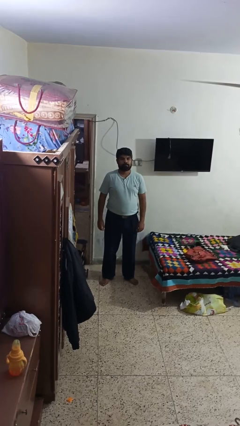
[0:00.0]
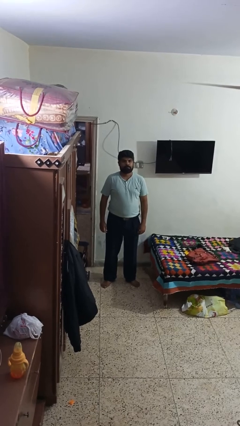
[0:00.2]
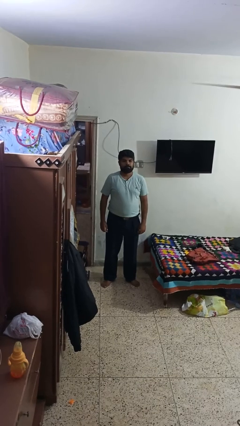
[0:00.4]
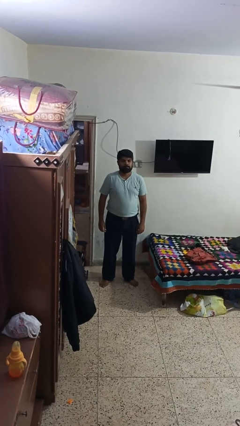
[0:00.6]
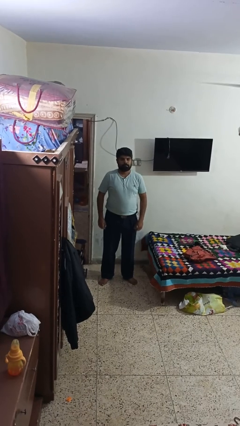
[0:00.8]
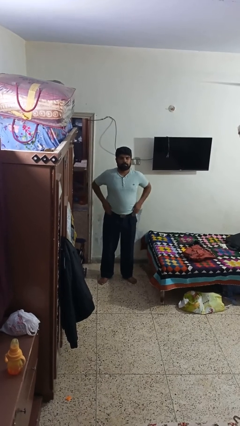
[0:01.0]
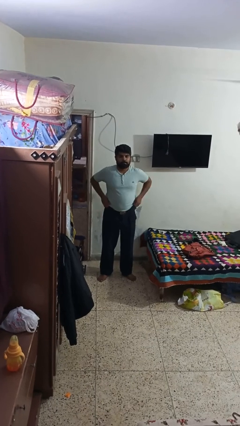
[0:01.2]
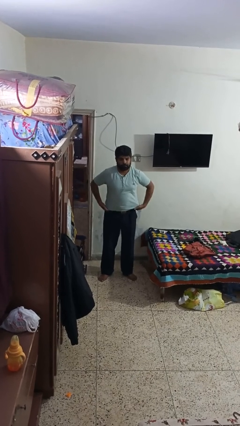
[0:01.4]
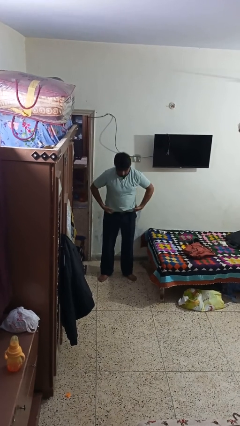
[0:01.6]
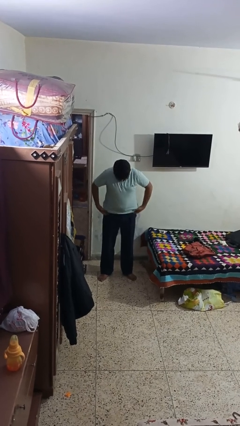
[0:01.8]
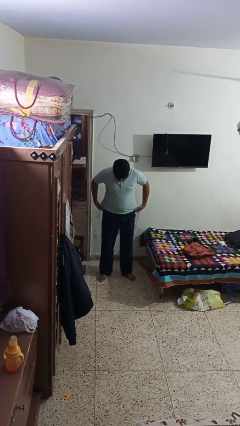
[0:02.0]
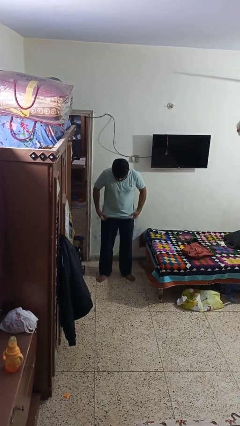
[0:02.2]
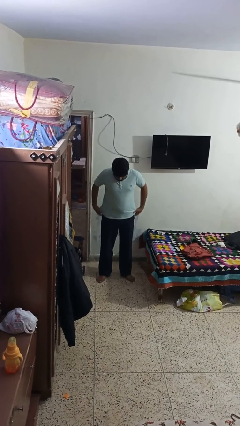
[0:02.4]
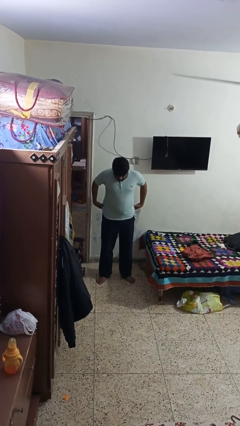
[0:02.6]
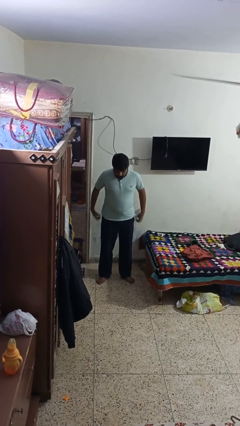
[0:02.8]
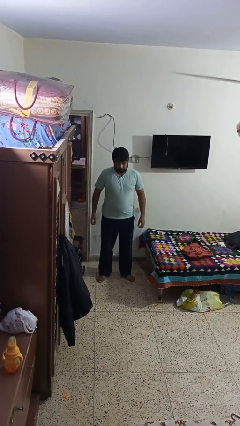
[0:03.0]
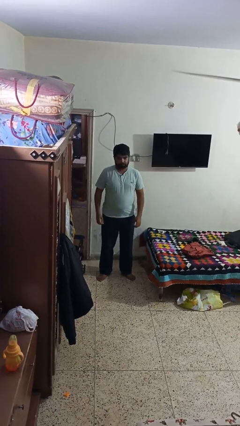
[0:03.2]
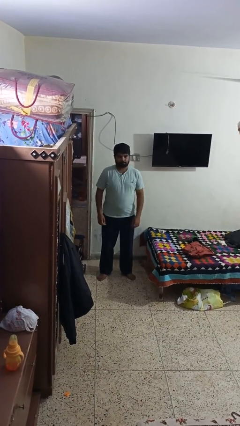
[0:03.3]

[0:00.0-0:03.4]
person untucks shirt

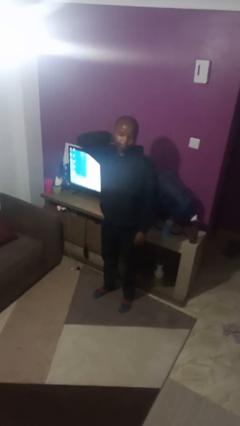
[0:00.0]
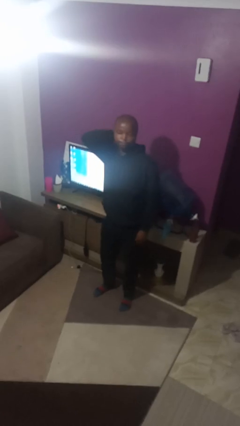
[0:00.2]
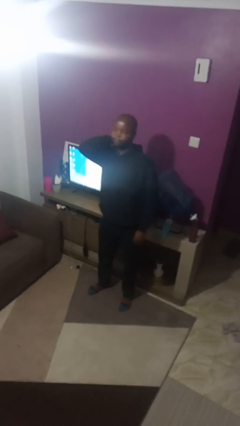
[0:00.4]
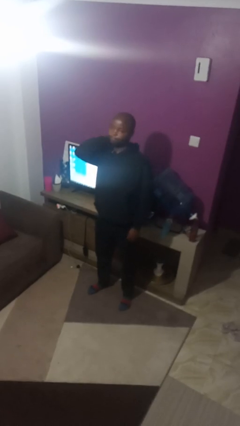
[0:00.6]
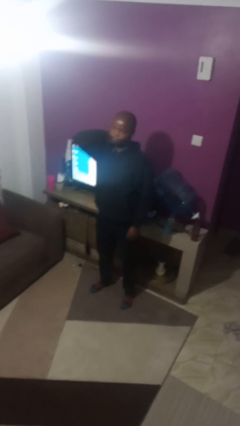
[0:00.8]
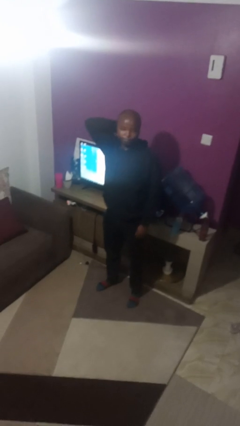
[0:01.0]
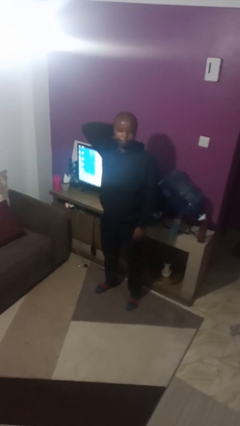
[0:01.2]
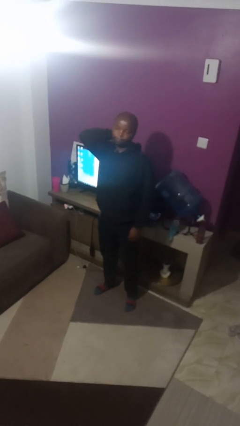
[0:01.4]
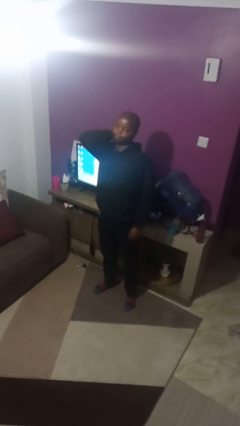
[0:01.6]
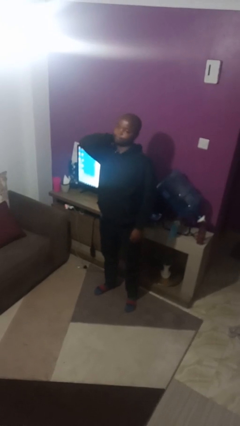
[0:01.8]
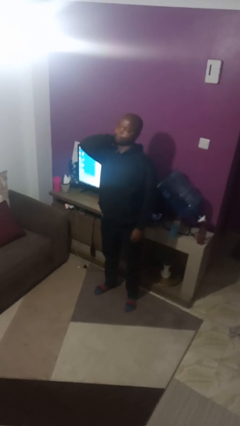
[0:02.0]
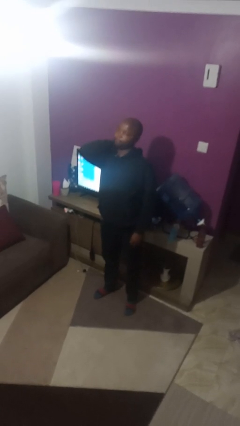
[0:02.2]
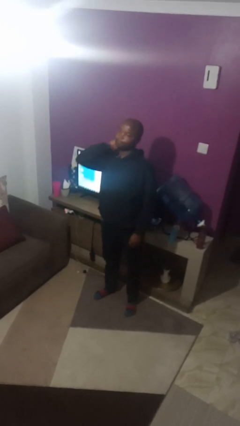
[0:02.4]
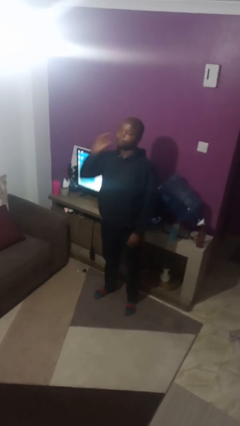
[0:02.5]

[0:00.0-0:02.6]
person rubs neck

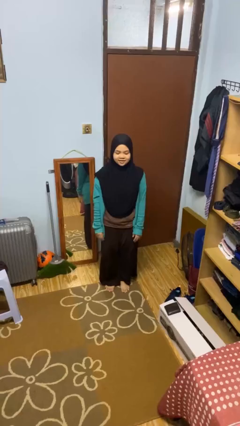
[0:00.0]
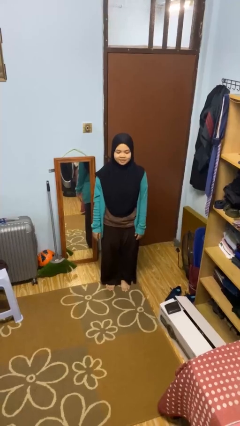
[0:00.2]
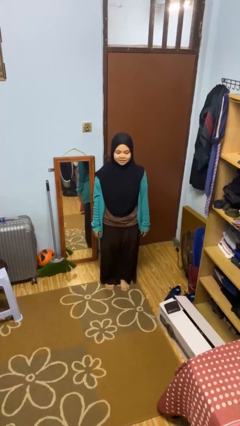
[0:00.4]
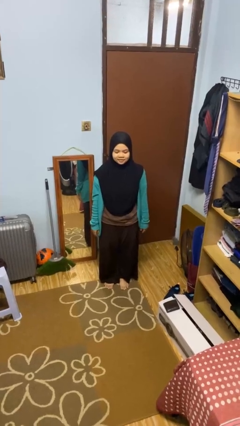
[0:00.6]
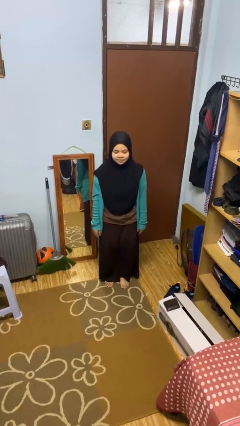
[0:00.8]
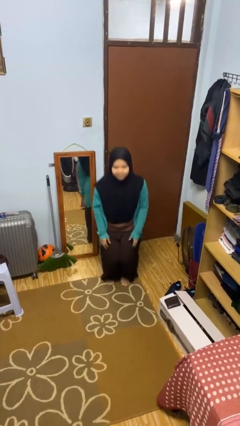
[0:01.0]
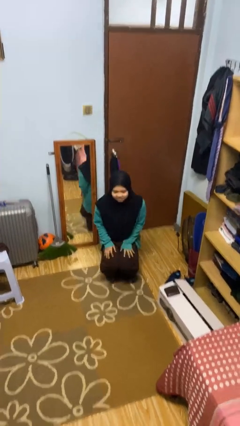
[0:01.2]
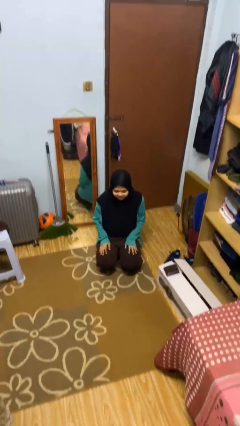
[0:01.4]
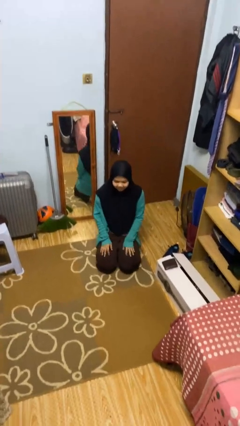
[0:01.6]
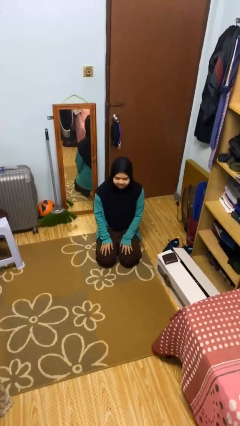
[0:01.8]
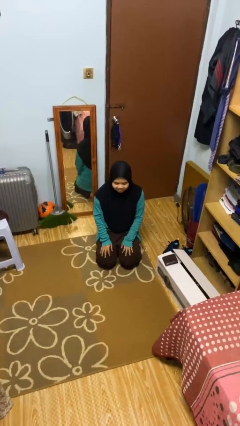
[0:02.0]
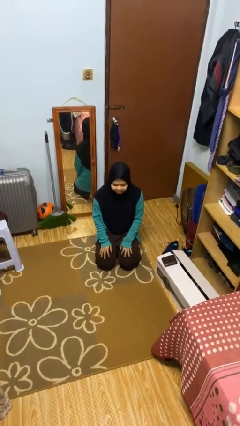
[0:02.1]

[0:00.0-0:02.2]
person kneels

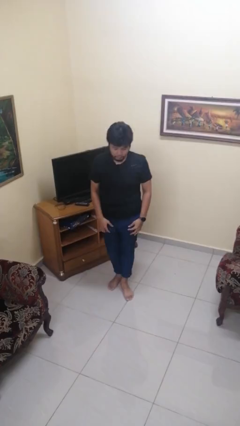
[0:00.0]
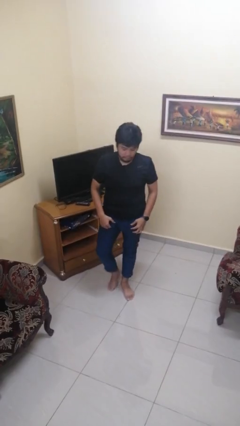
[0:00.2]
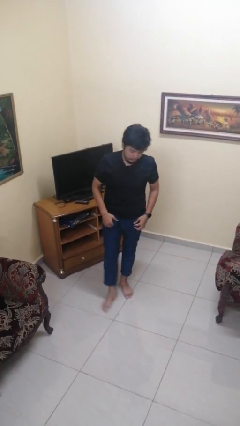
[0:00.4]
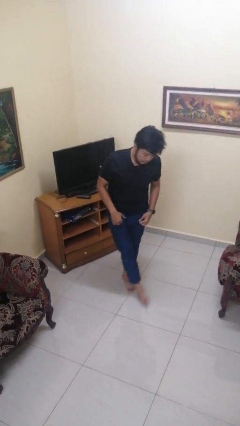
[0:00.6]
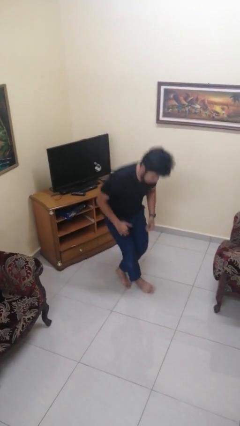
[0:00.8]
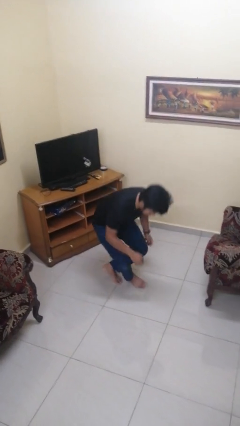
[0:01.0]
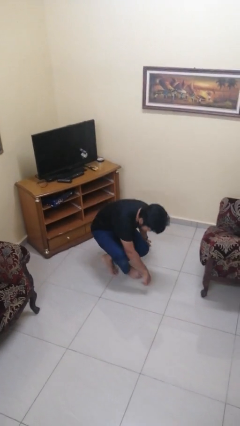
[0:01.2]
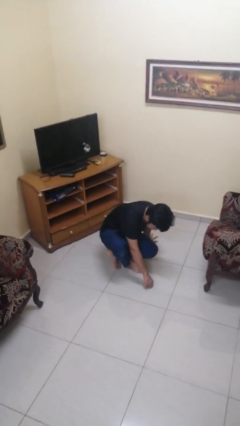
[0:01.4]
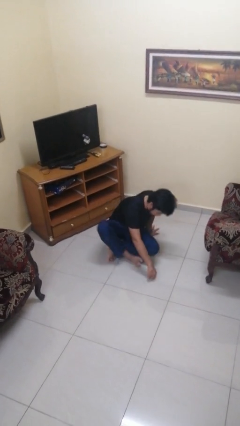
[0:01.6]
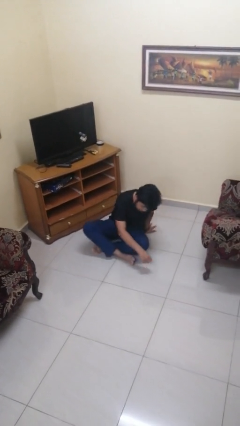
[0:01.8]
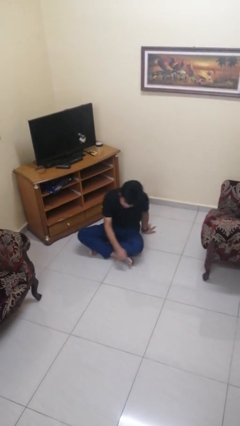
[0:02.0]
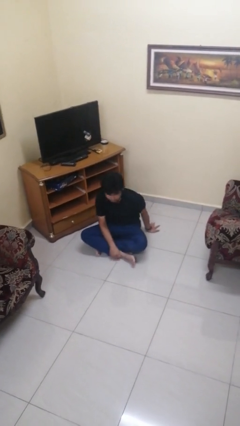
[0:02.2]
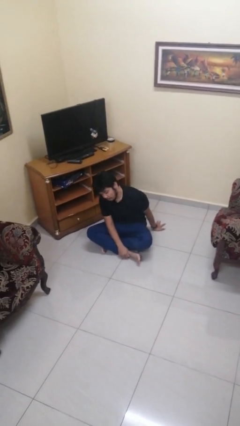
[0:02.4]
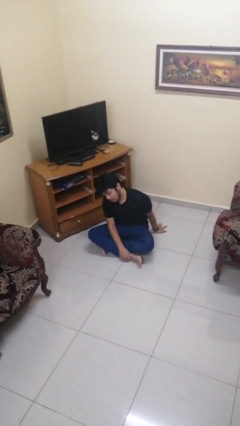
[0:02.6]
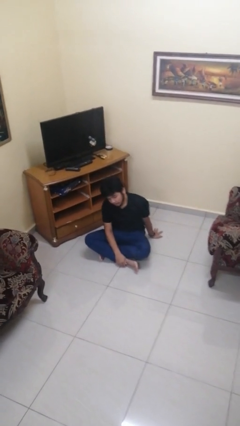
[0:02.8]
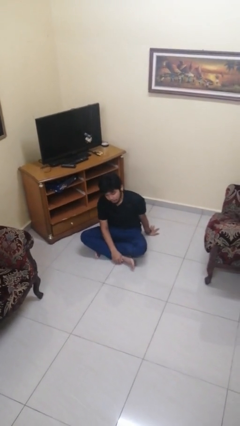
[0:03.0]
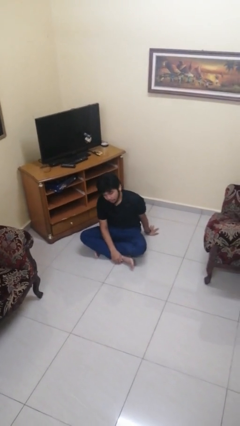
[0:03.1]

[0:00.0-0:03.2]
person sits crisscross

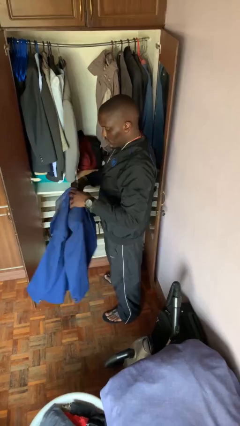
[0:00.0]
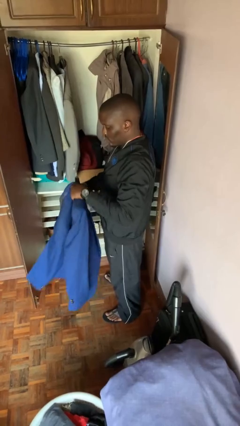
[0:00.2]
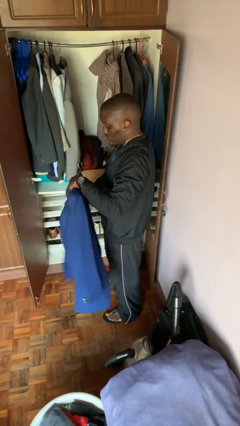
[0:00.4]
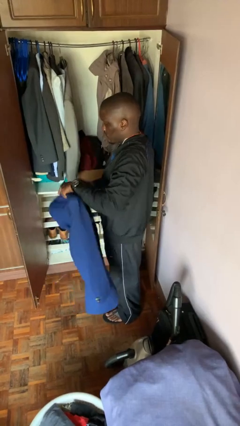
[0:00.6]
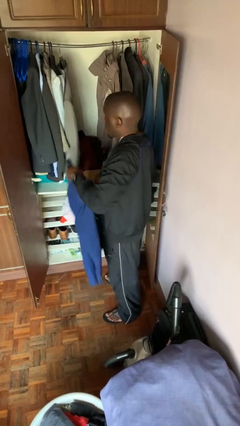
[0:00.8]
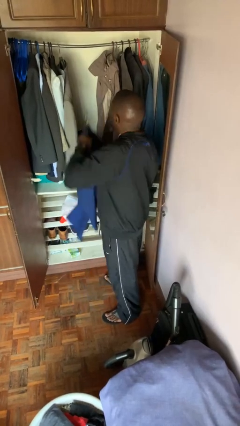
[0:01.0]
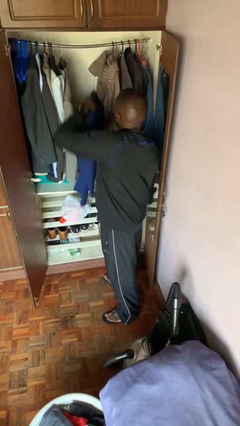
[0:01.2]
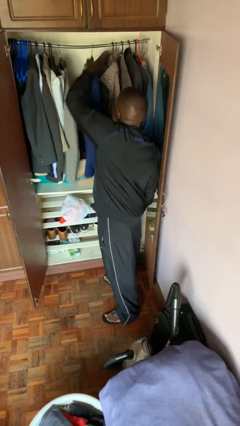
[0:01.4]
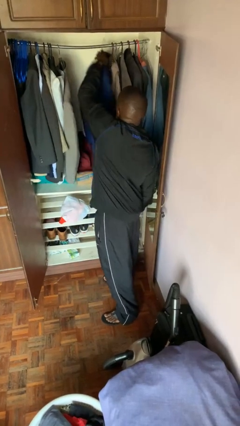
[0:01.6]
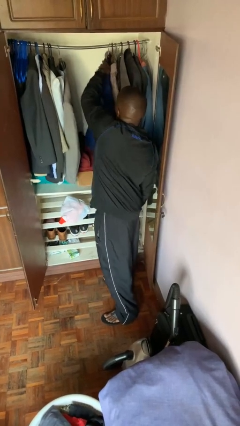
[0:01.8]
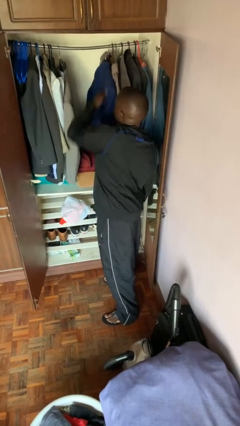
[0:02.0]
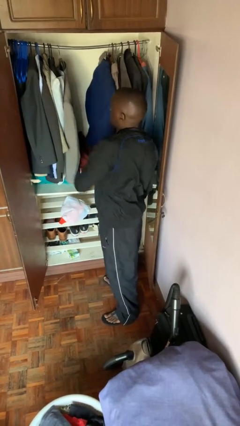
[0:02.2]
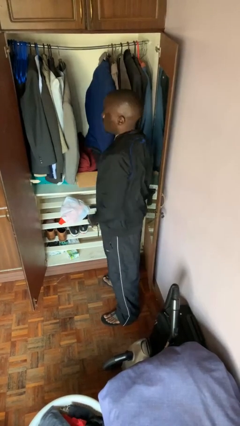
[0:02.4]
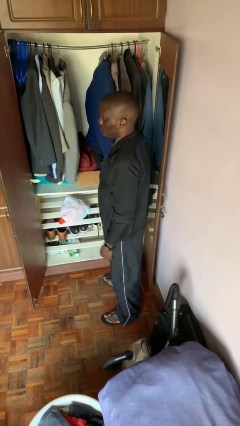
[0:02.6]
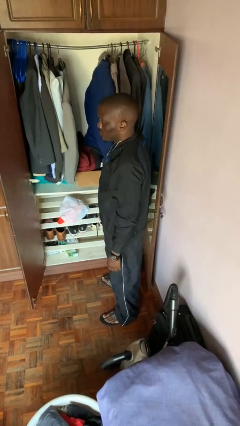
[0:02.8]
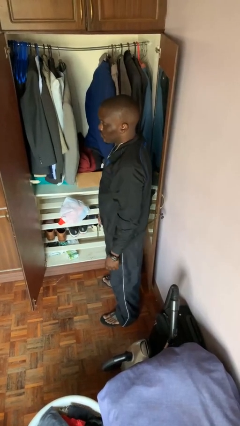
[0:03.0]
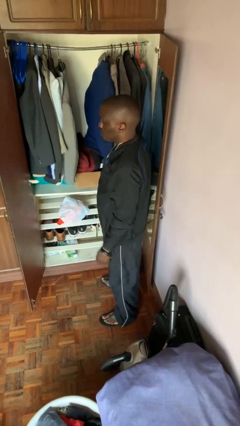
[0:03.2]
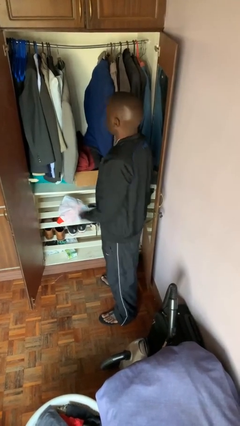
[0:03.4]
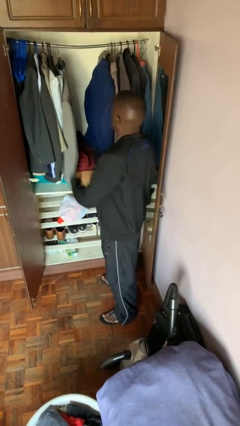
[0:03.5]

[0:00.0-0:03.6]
person puts clothes into closet

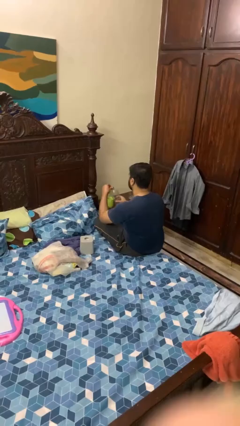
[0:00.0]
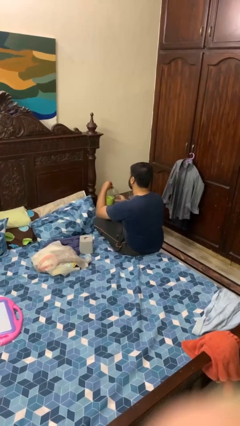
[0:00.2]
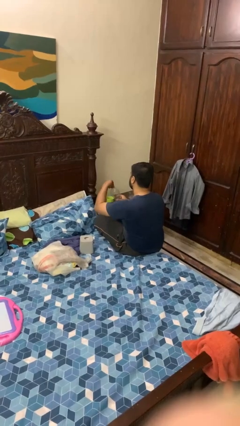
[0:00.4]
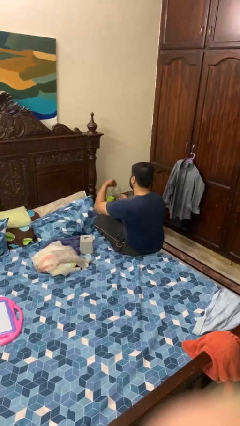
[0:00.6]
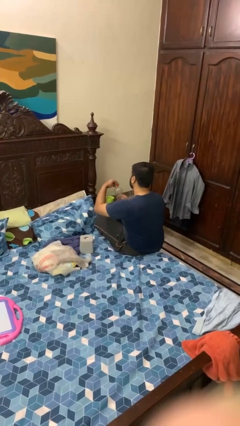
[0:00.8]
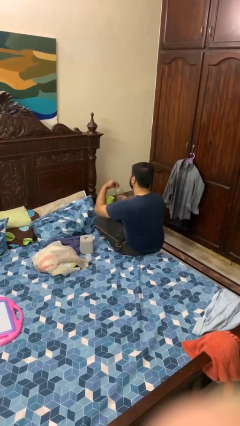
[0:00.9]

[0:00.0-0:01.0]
person screws lid to bottle

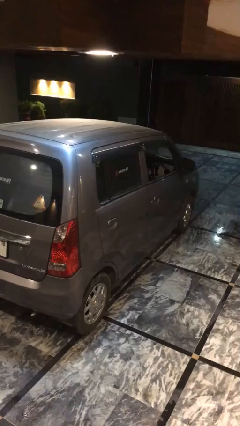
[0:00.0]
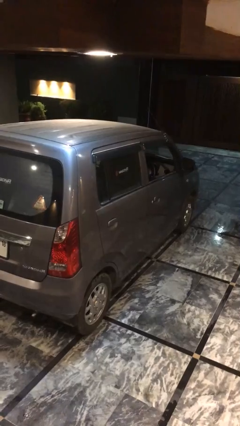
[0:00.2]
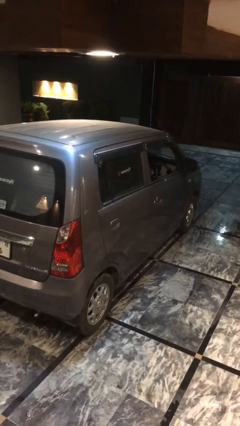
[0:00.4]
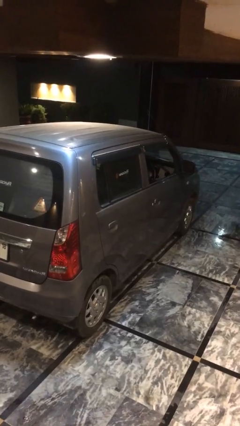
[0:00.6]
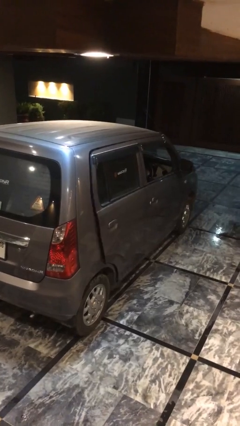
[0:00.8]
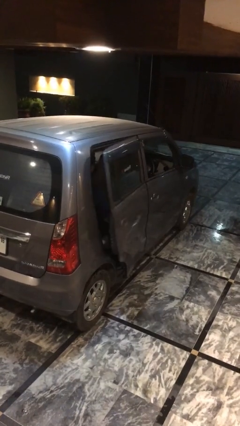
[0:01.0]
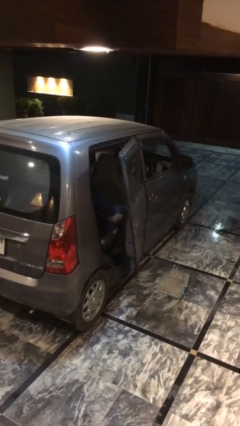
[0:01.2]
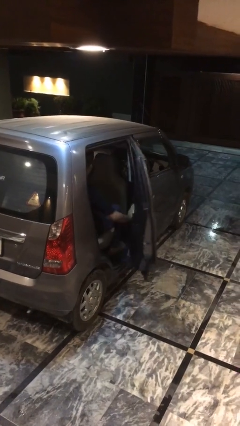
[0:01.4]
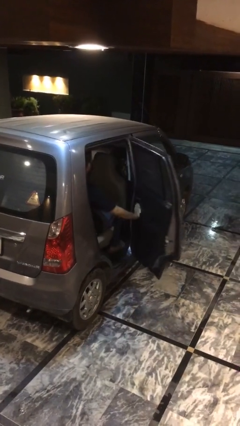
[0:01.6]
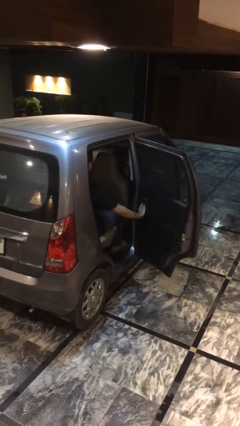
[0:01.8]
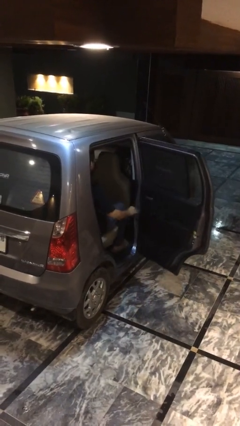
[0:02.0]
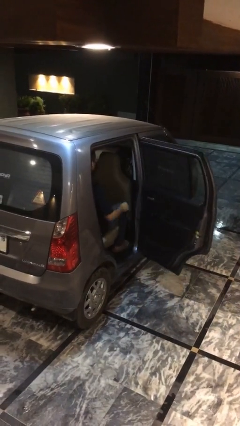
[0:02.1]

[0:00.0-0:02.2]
person opens car door
